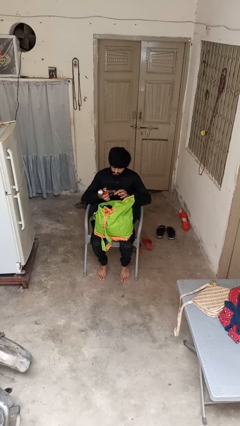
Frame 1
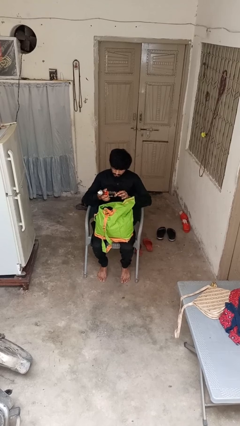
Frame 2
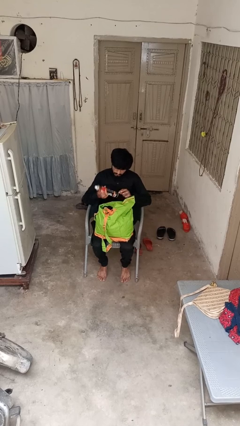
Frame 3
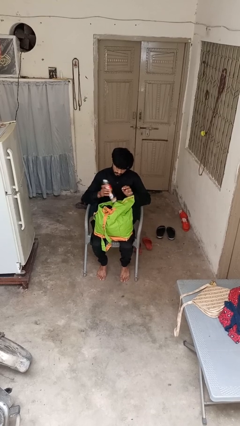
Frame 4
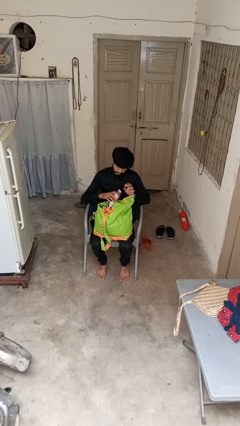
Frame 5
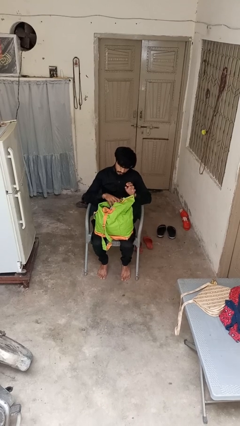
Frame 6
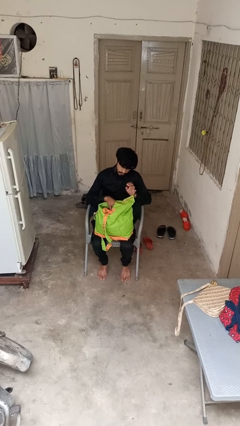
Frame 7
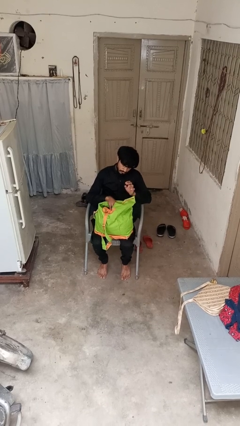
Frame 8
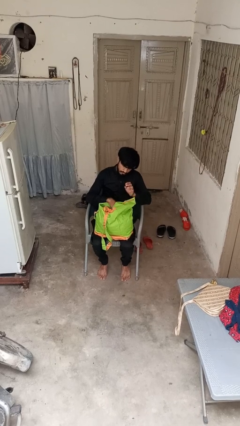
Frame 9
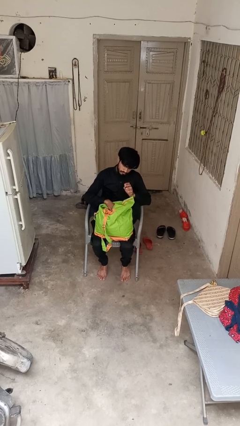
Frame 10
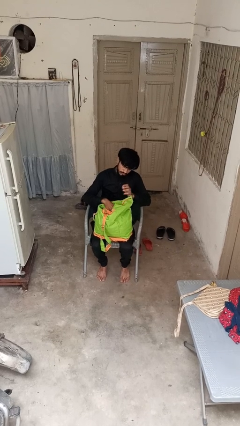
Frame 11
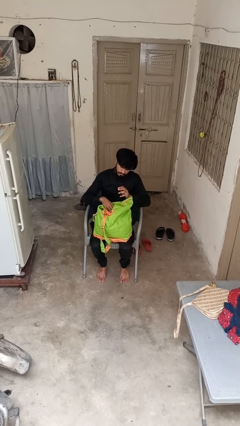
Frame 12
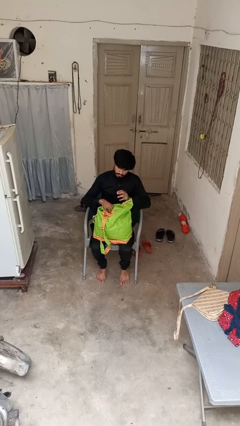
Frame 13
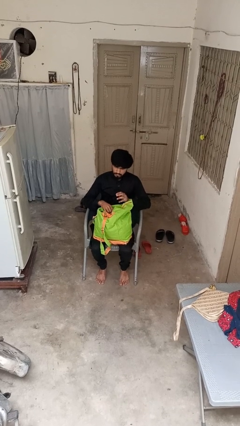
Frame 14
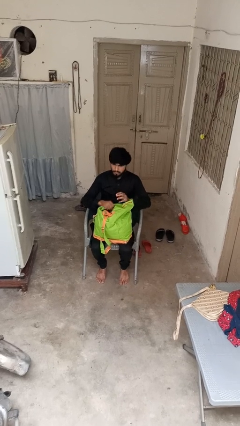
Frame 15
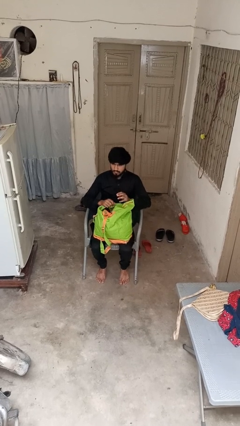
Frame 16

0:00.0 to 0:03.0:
person puts object into backpack

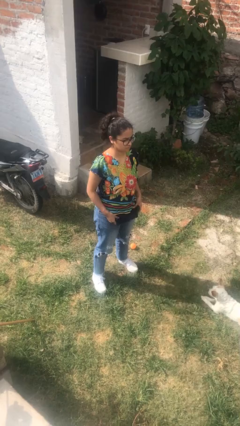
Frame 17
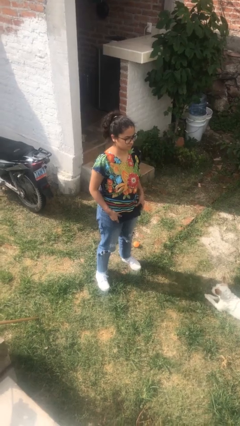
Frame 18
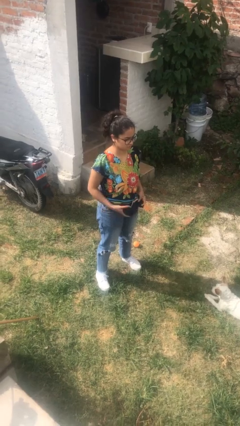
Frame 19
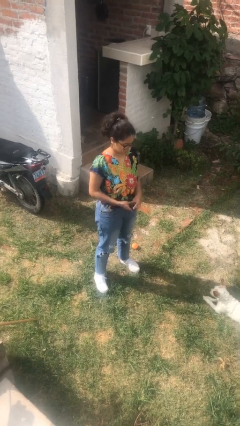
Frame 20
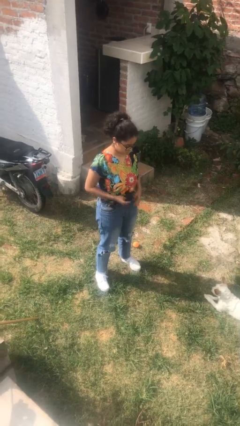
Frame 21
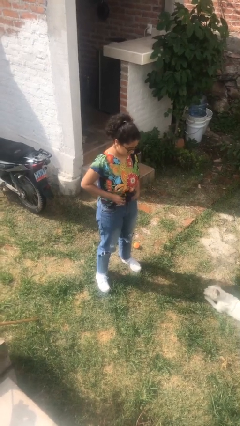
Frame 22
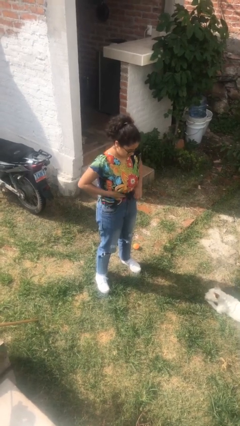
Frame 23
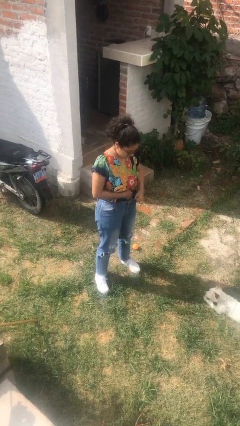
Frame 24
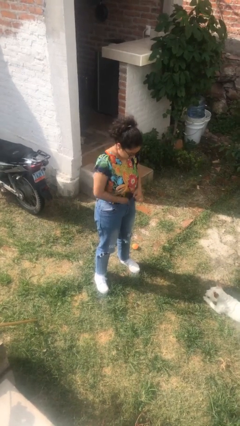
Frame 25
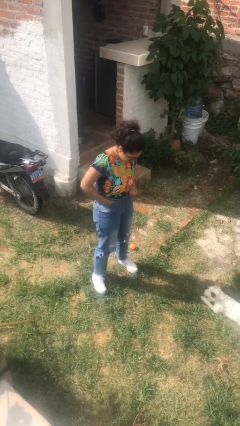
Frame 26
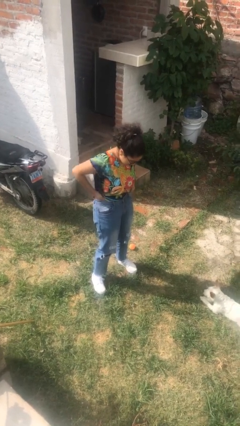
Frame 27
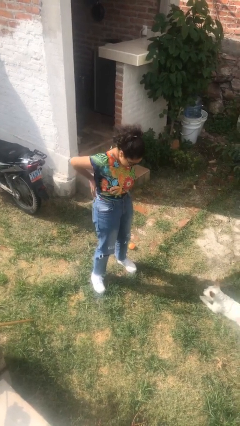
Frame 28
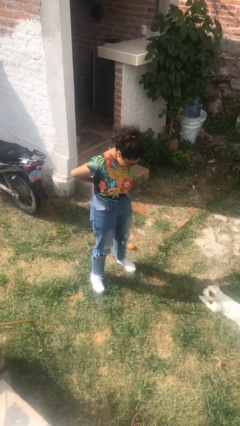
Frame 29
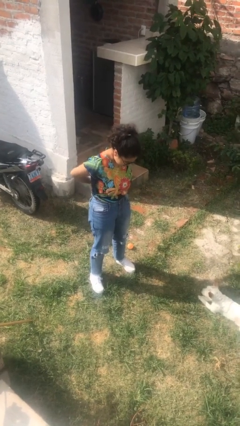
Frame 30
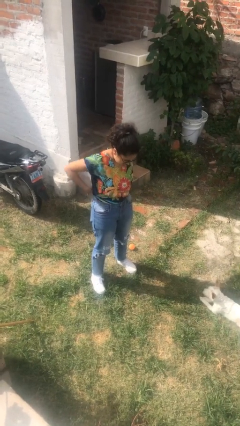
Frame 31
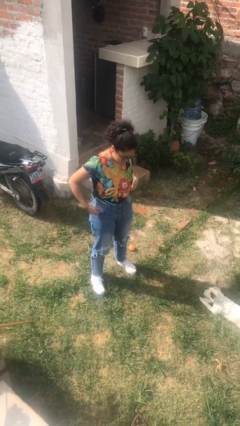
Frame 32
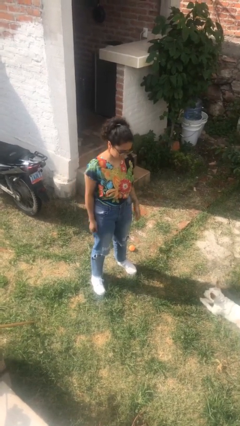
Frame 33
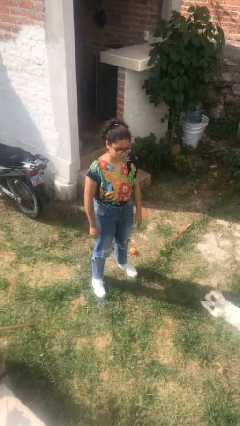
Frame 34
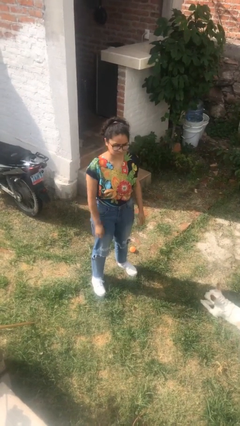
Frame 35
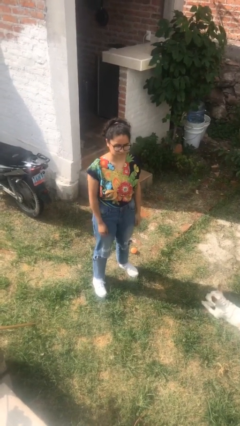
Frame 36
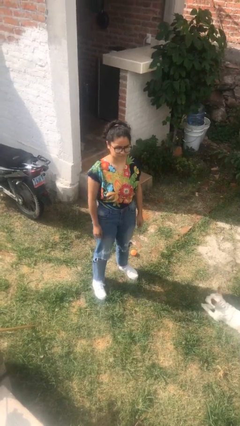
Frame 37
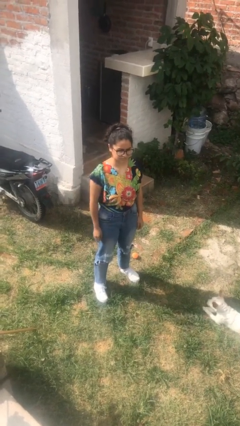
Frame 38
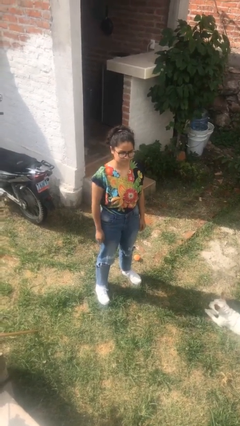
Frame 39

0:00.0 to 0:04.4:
person tucks in shirt

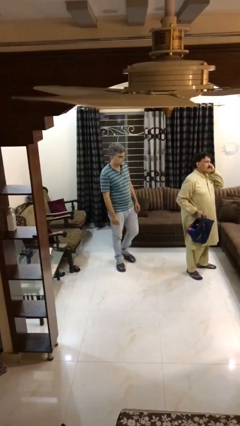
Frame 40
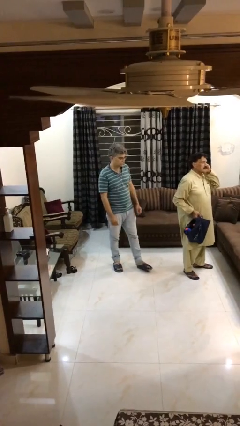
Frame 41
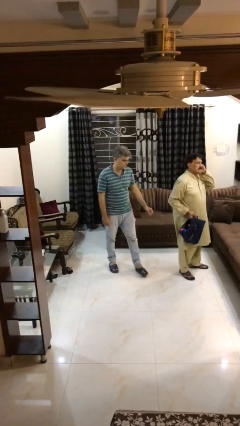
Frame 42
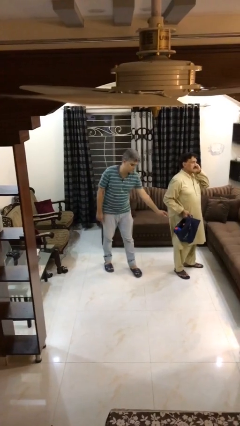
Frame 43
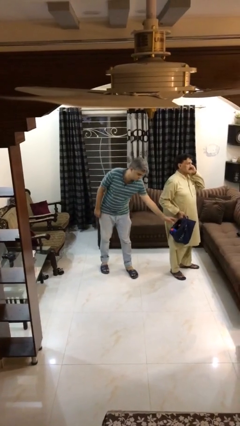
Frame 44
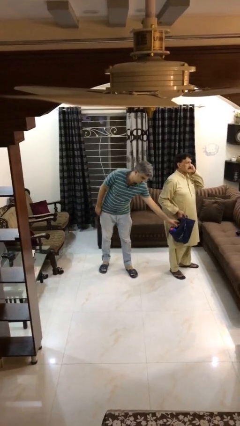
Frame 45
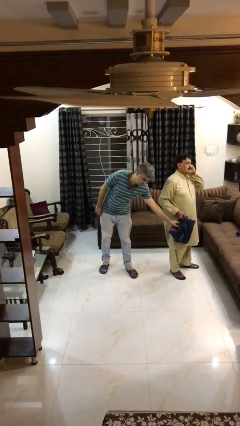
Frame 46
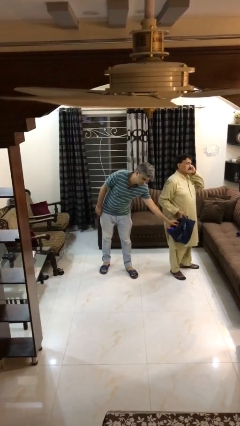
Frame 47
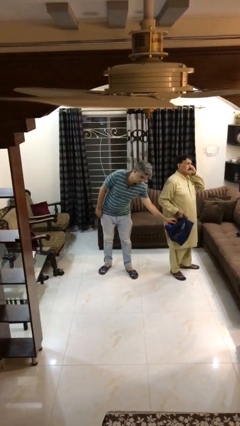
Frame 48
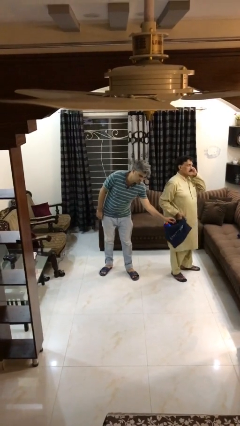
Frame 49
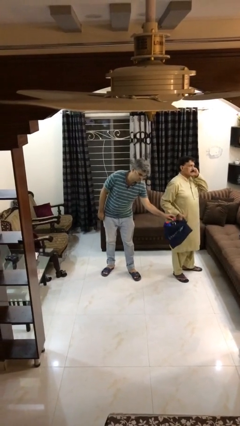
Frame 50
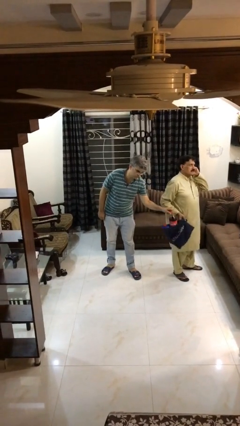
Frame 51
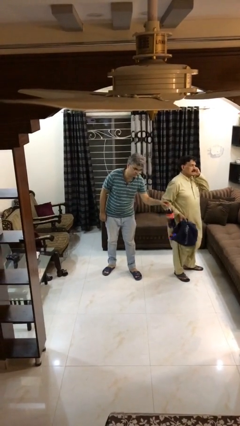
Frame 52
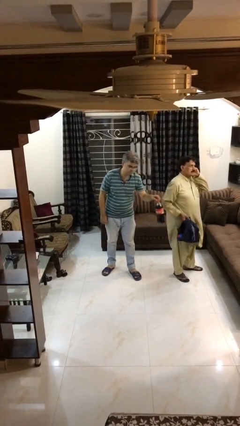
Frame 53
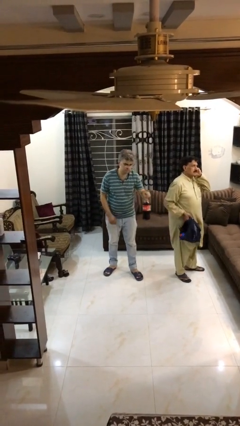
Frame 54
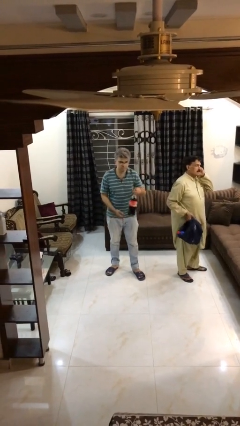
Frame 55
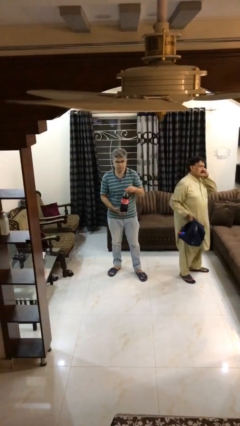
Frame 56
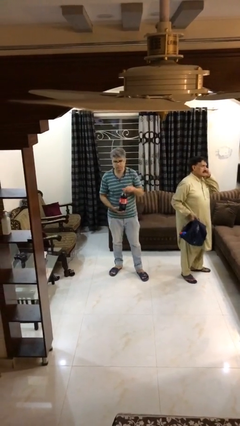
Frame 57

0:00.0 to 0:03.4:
person steals object from person

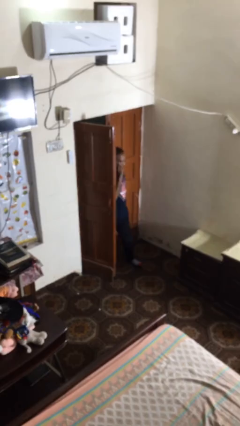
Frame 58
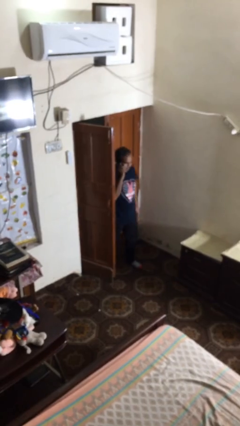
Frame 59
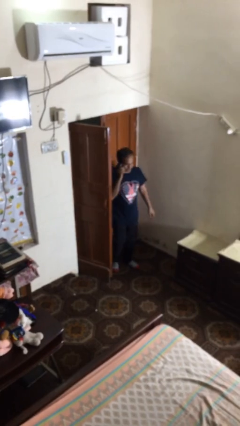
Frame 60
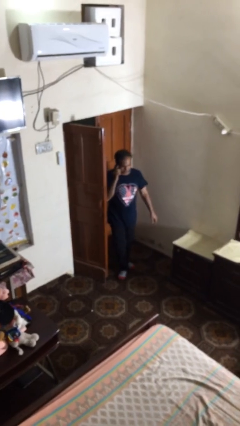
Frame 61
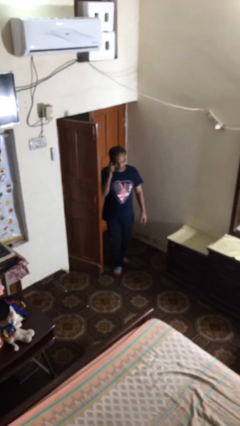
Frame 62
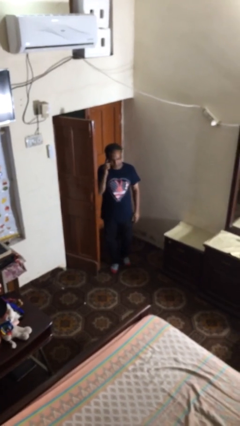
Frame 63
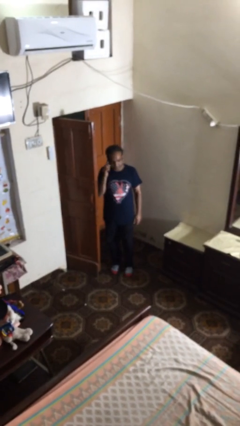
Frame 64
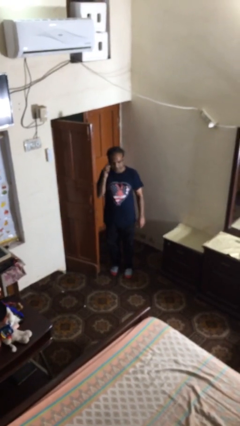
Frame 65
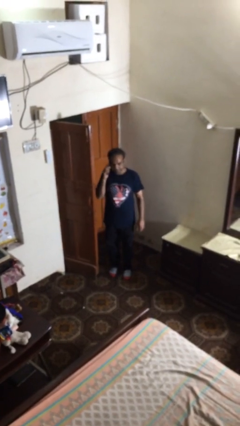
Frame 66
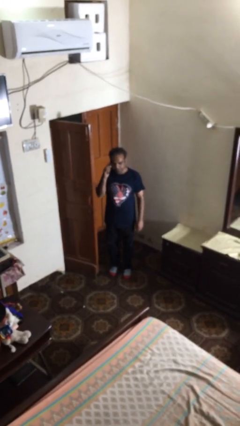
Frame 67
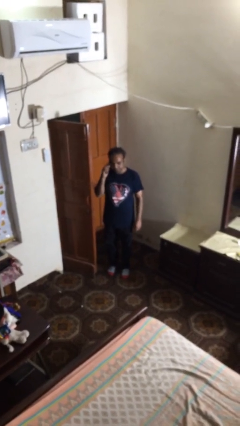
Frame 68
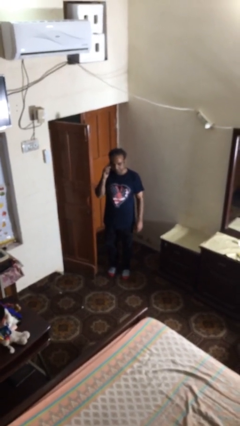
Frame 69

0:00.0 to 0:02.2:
person enters scene through structure

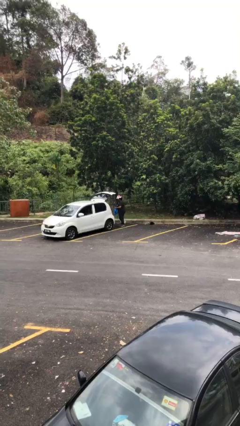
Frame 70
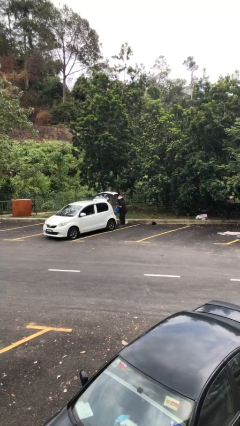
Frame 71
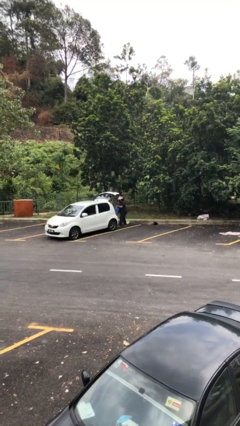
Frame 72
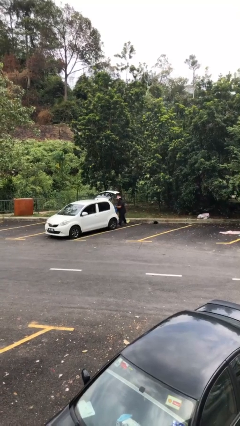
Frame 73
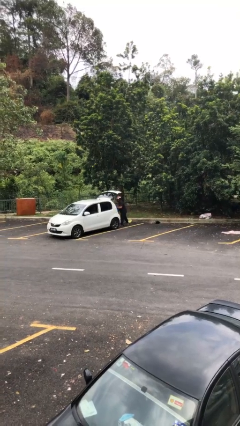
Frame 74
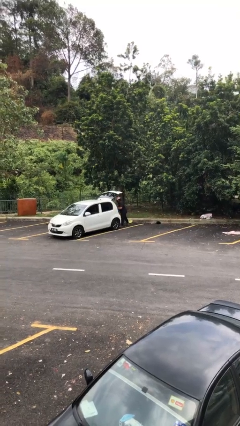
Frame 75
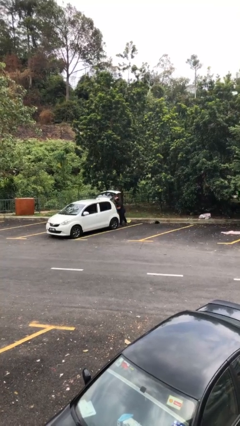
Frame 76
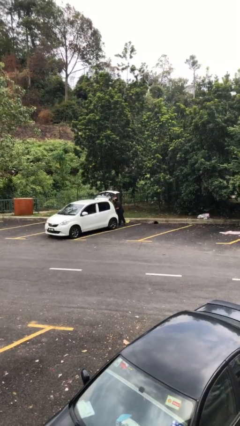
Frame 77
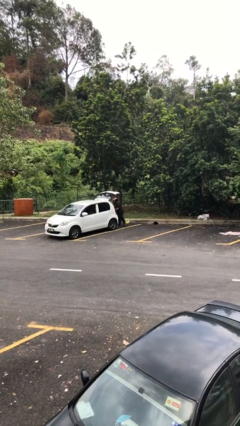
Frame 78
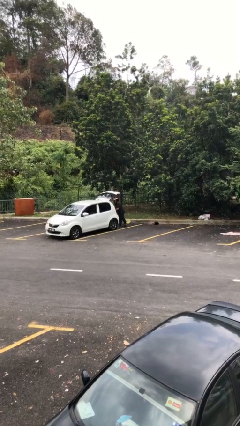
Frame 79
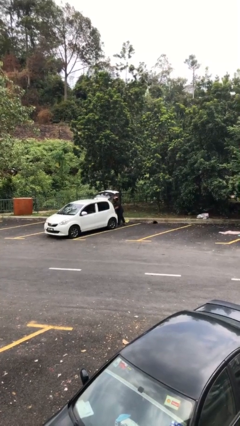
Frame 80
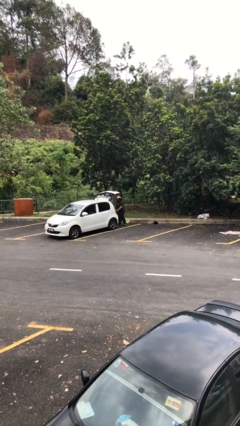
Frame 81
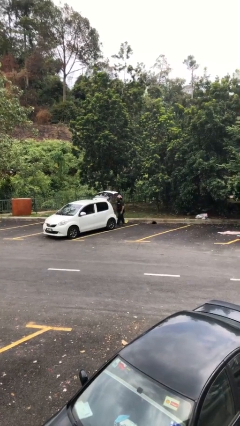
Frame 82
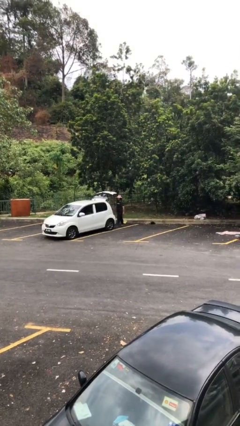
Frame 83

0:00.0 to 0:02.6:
person loads car

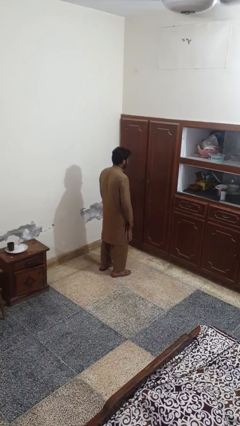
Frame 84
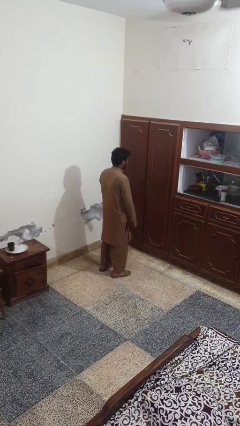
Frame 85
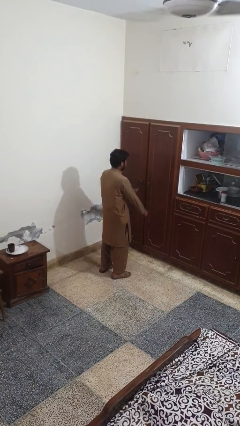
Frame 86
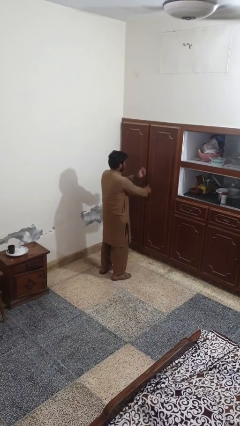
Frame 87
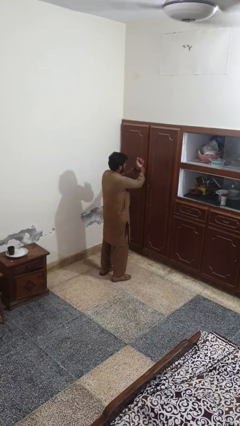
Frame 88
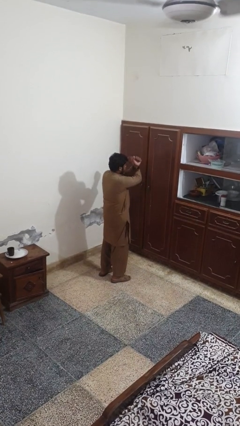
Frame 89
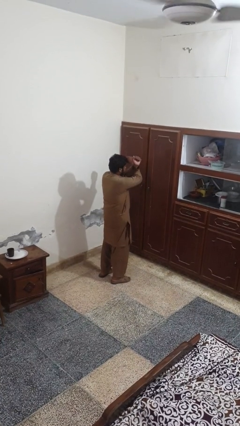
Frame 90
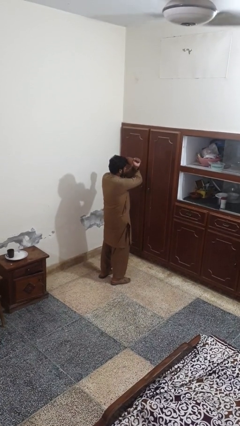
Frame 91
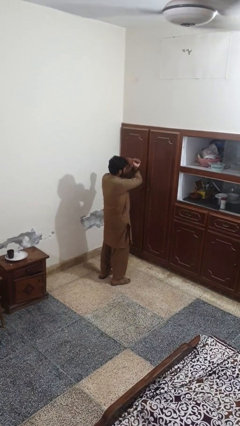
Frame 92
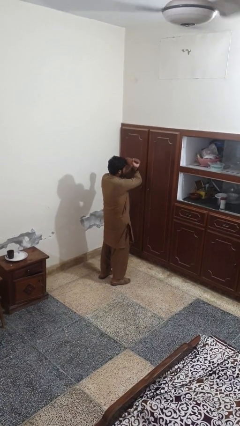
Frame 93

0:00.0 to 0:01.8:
person gestures arms x

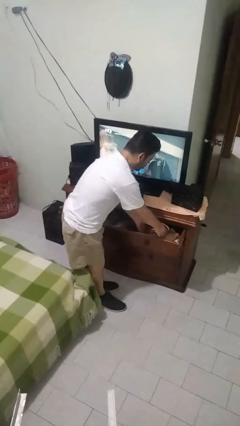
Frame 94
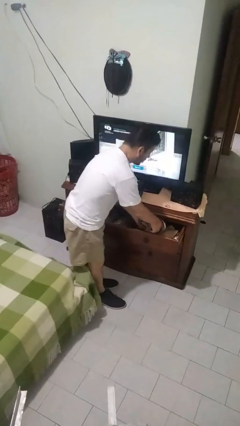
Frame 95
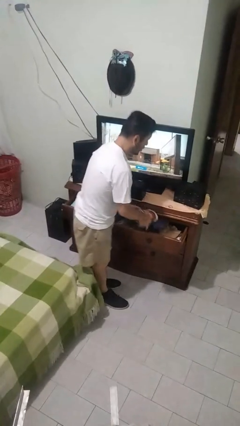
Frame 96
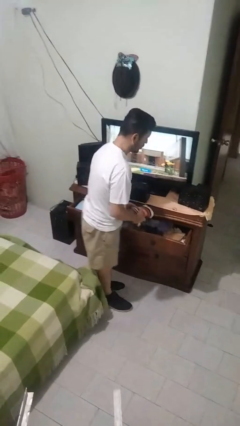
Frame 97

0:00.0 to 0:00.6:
person takes clothes from dresser
